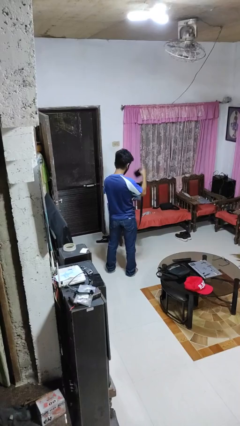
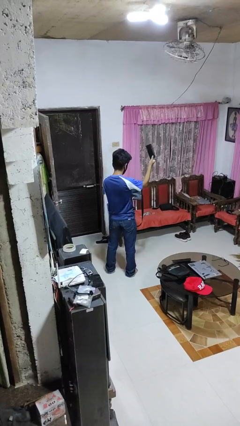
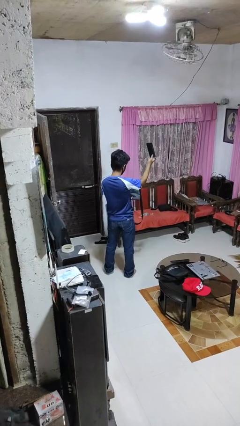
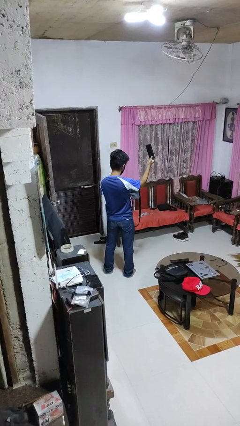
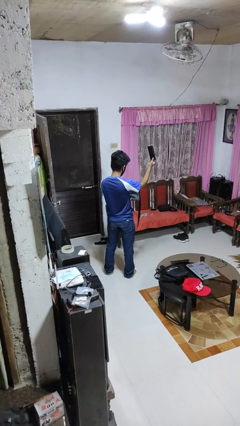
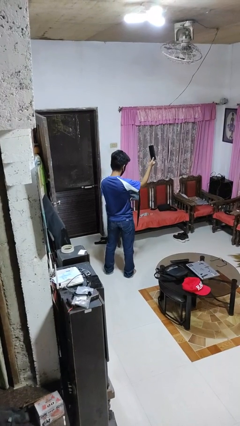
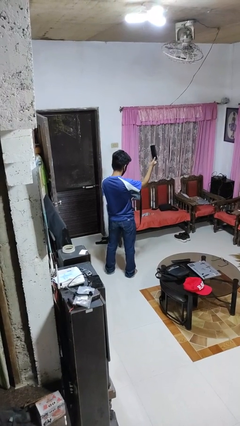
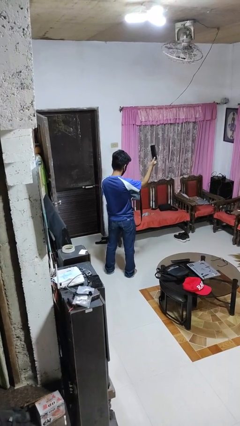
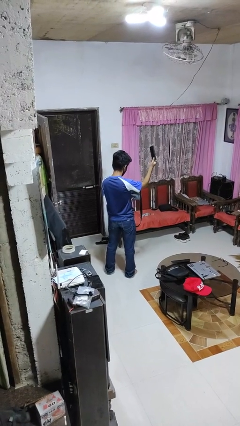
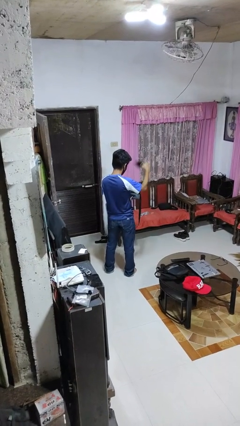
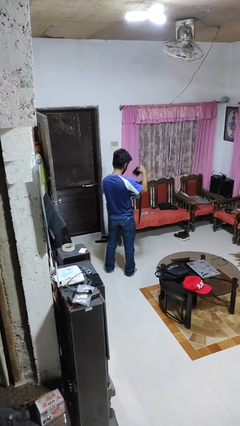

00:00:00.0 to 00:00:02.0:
person takes object from purse

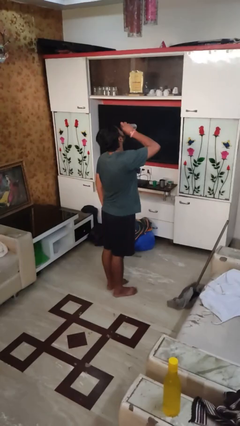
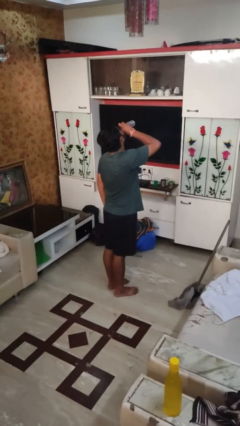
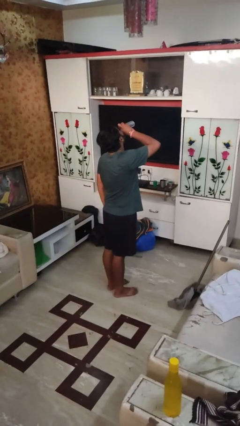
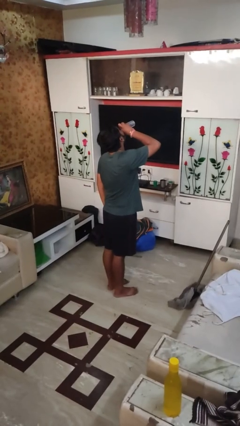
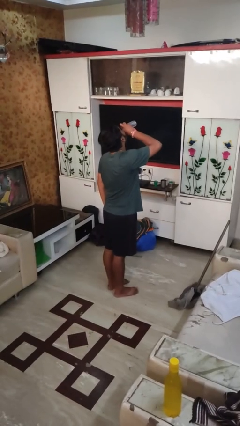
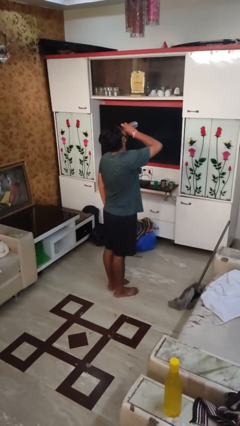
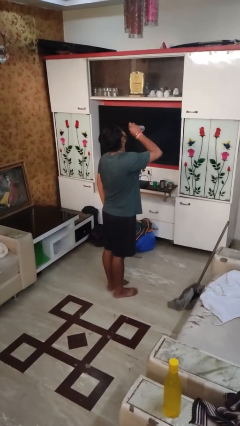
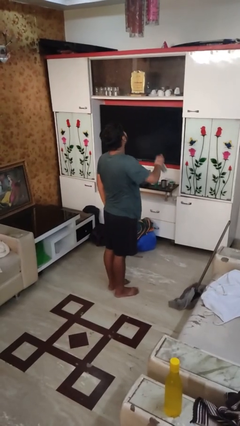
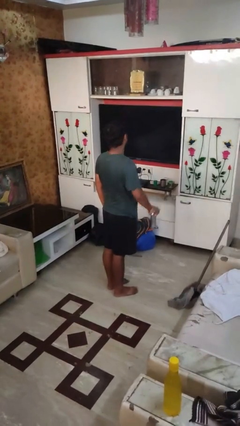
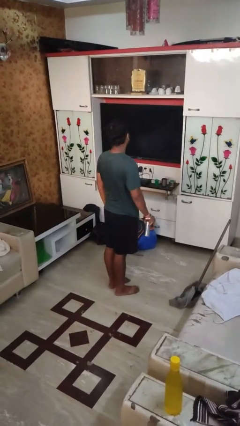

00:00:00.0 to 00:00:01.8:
person drinks from beverage can

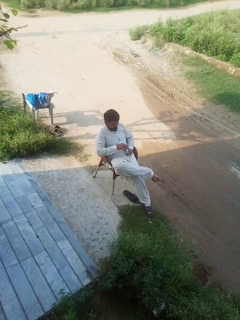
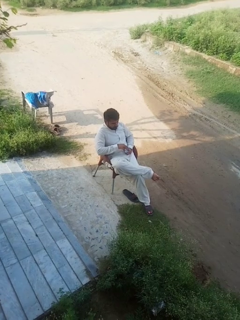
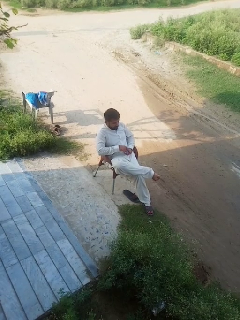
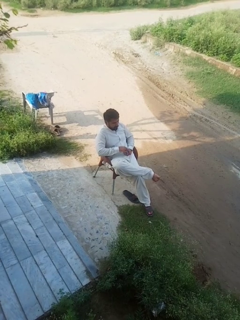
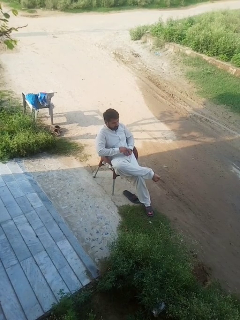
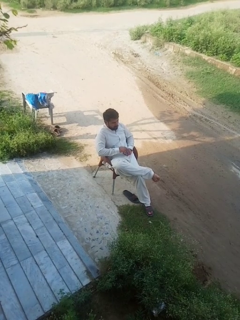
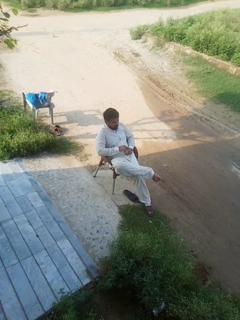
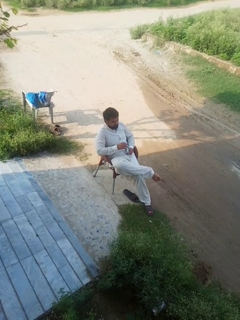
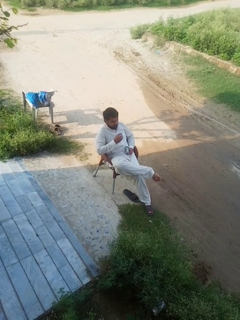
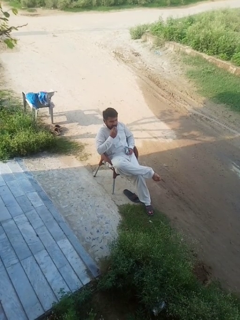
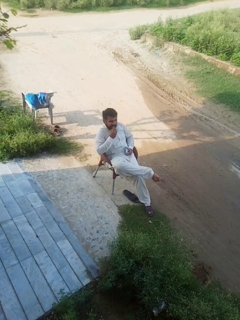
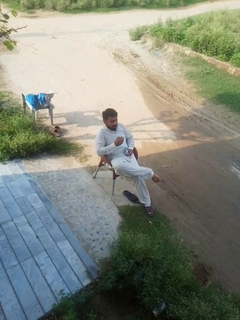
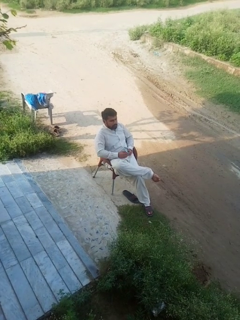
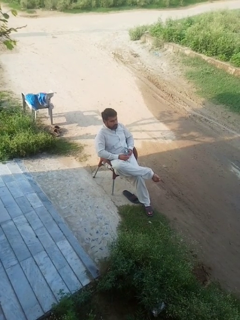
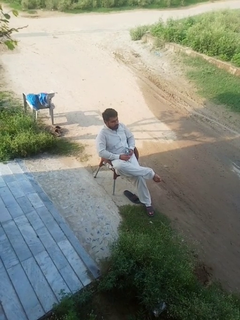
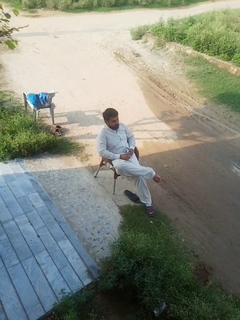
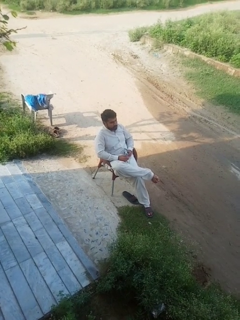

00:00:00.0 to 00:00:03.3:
person eats snack from bag

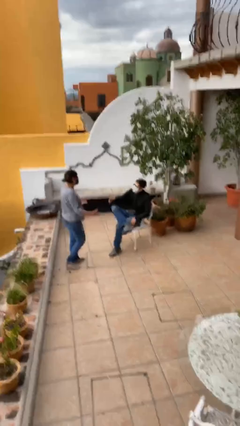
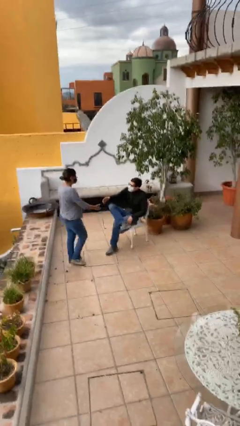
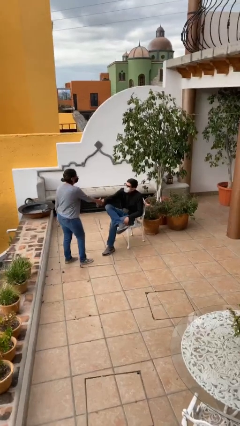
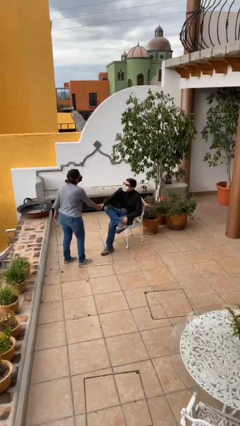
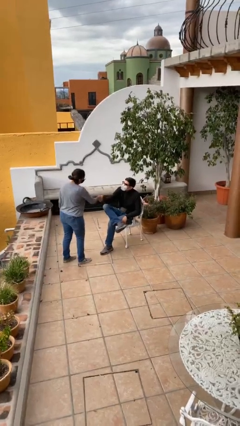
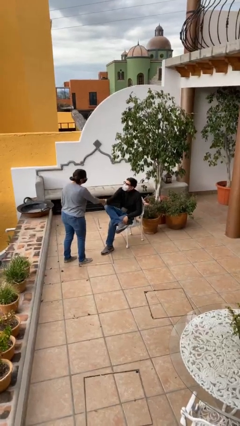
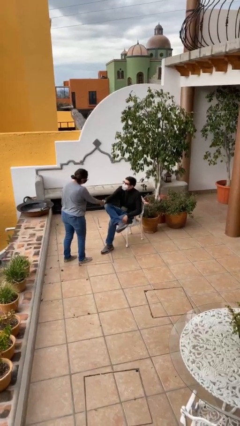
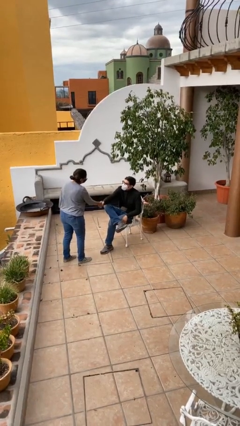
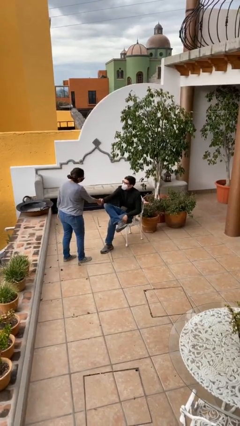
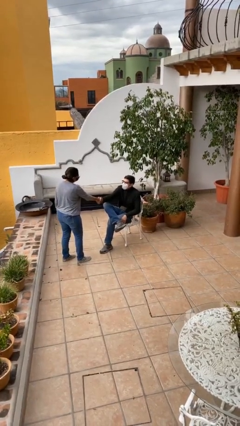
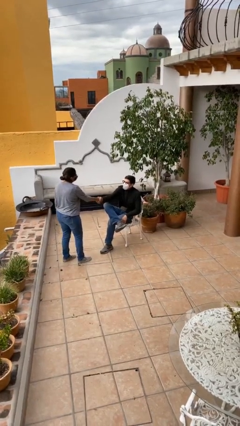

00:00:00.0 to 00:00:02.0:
person shakes hand

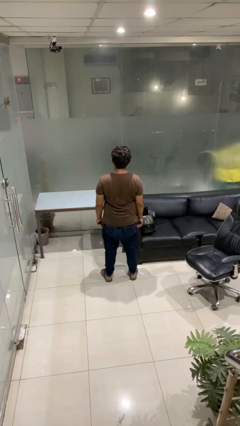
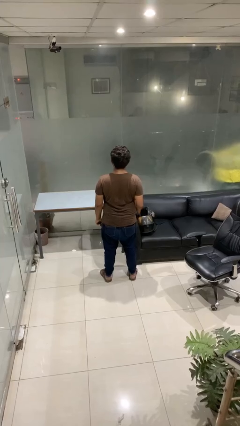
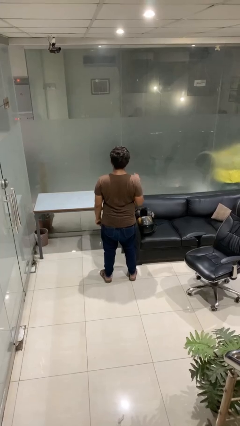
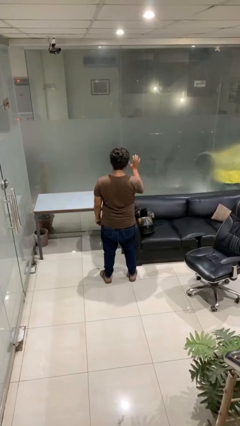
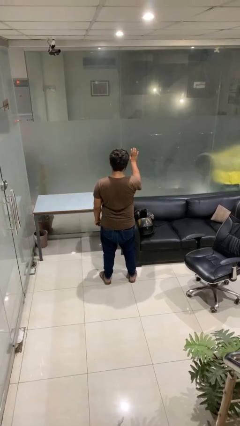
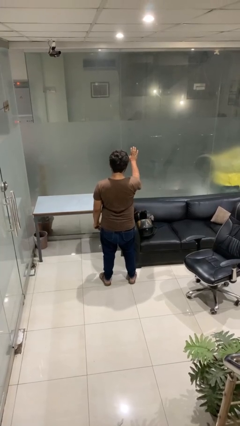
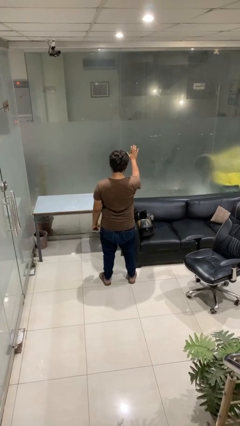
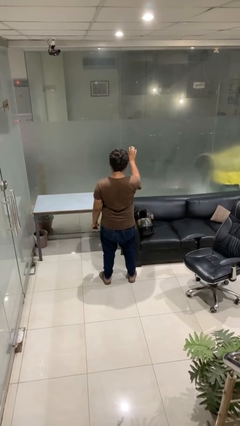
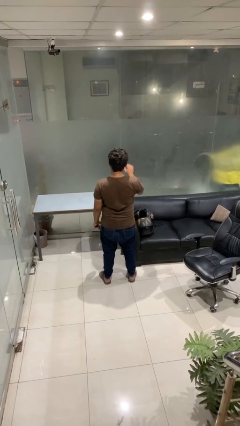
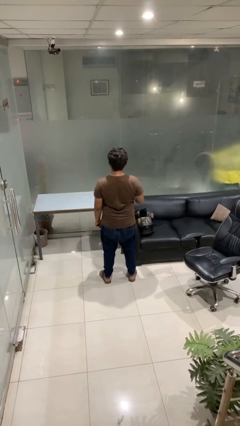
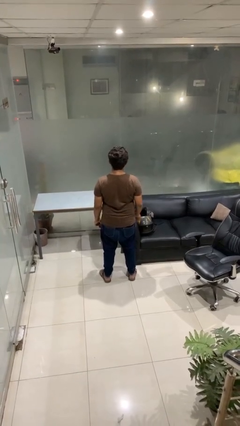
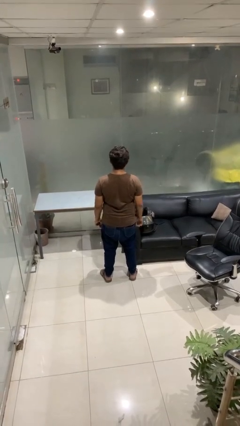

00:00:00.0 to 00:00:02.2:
person gestures stop

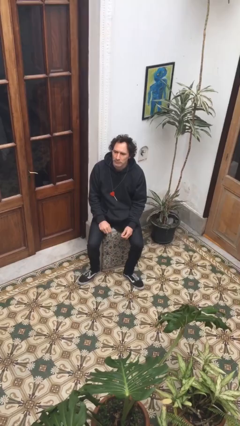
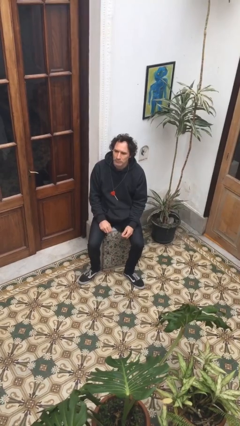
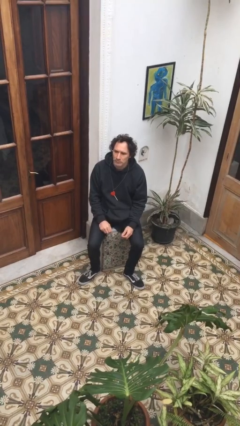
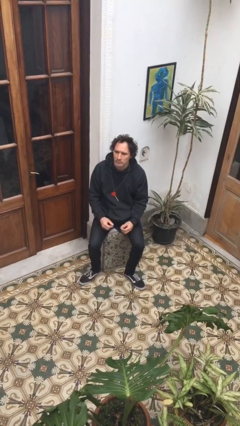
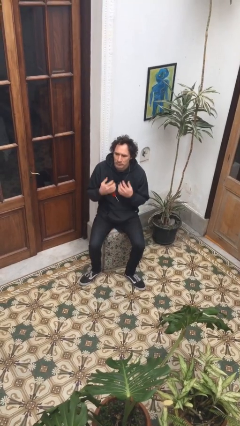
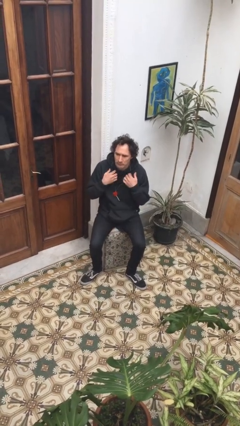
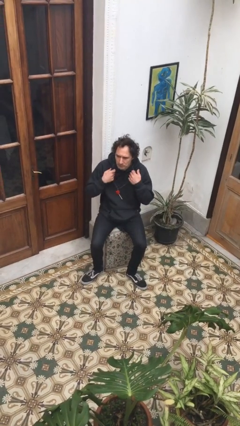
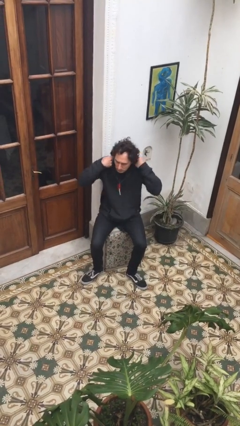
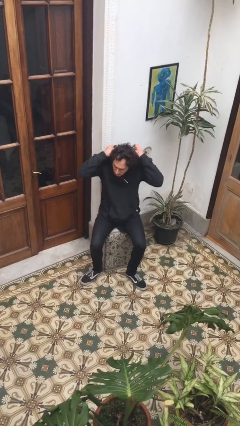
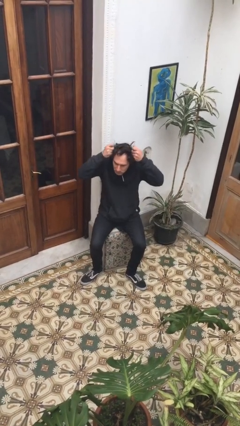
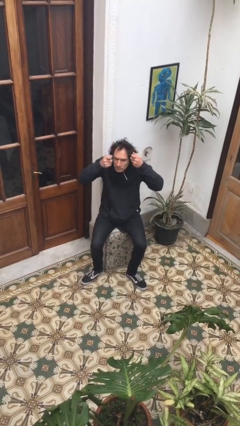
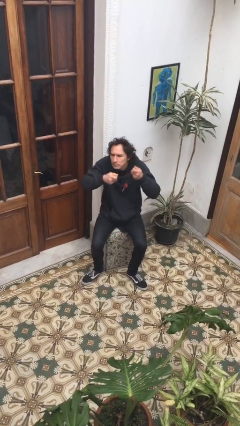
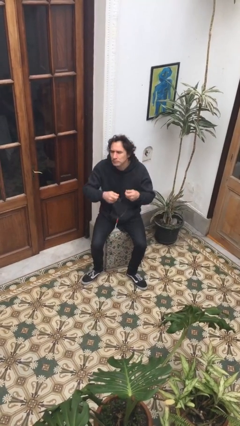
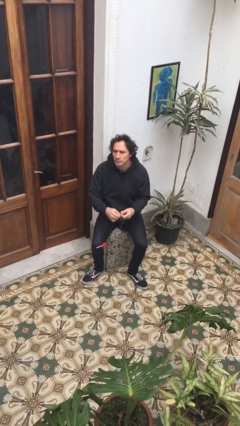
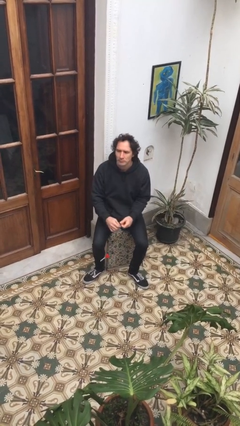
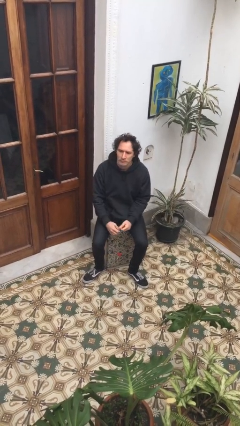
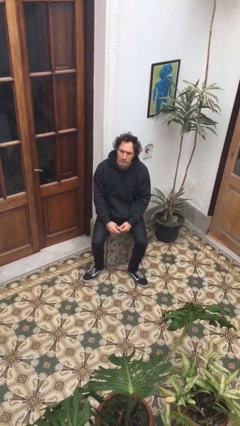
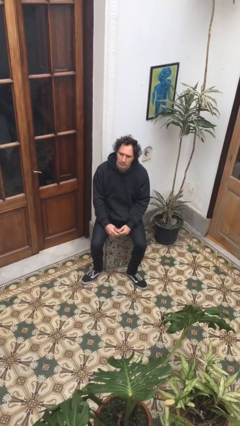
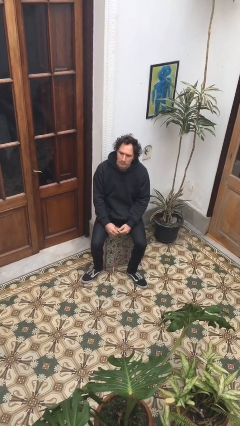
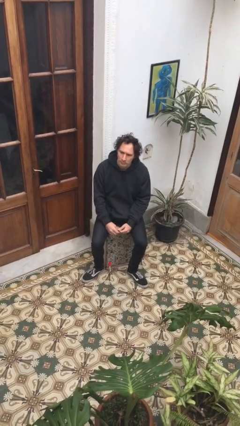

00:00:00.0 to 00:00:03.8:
person takes off necklace

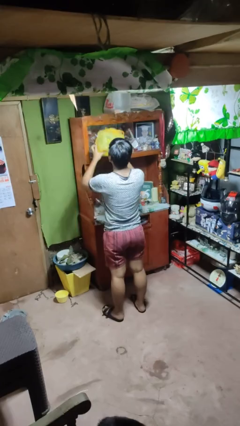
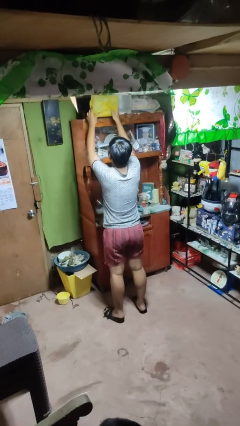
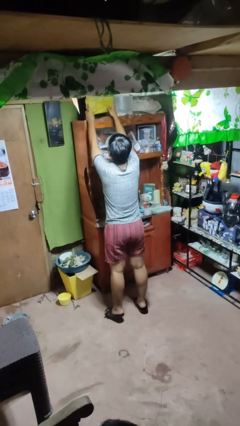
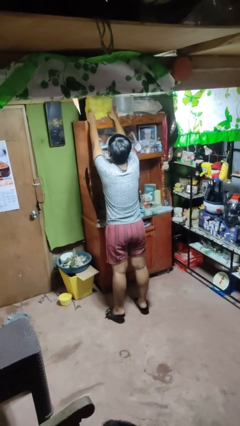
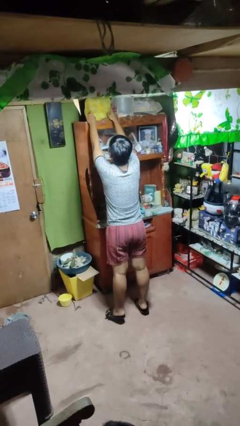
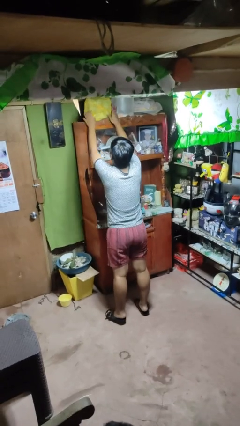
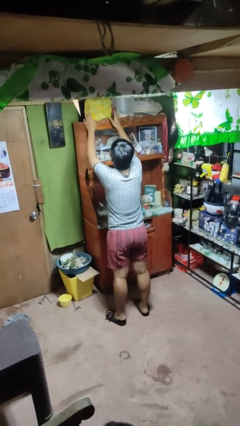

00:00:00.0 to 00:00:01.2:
person puts down object on shelf

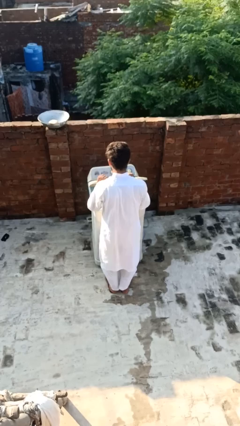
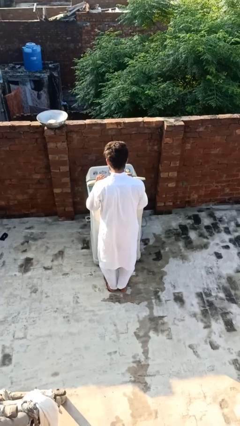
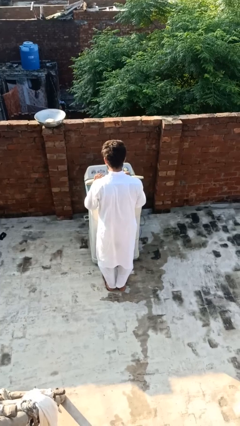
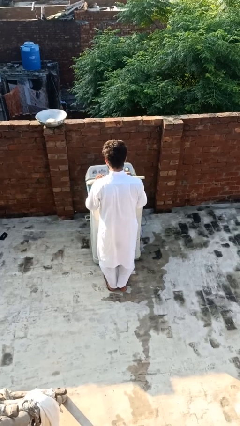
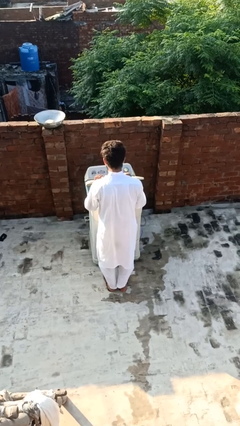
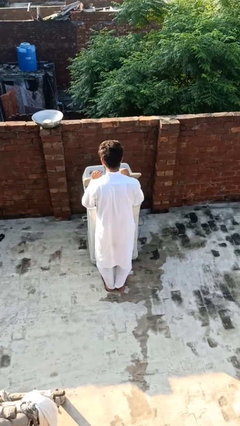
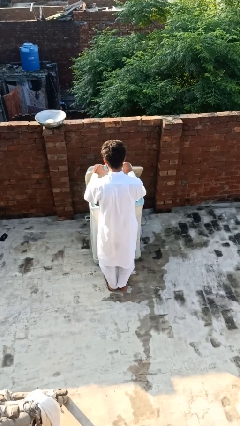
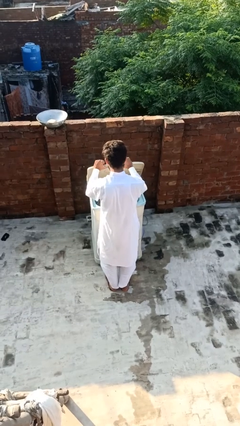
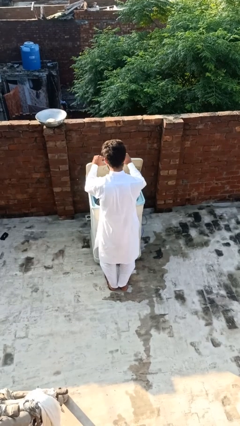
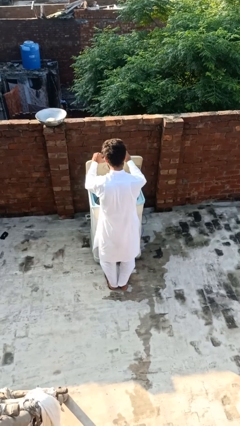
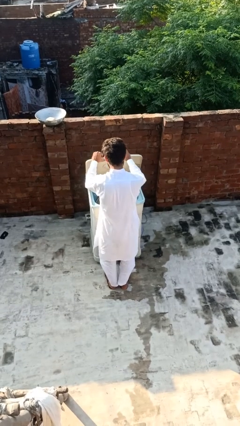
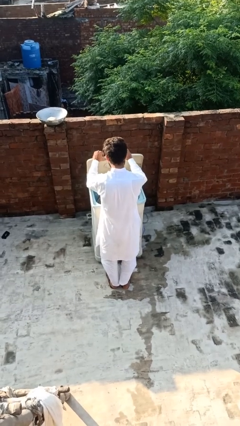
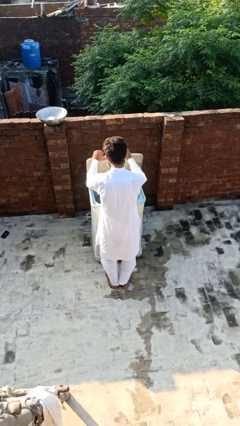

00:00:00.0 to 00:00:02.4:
person opens clothes washer
